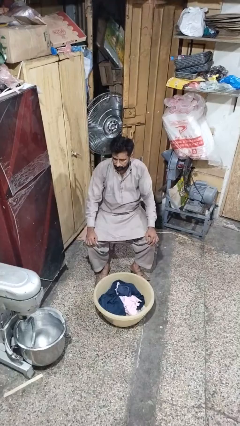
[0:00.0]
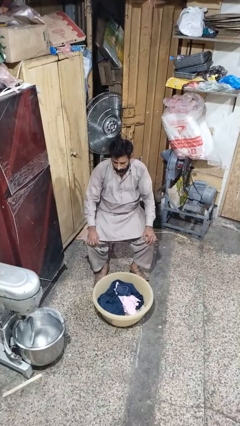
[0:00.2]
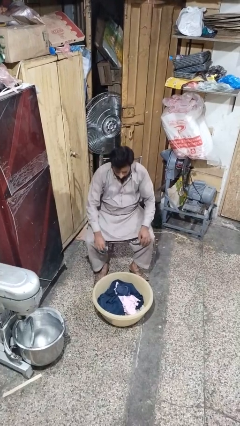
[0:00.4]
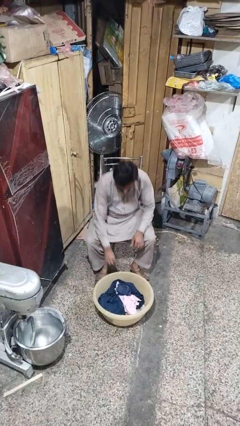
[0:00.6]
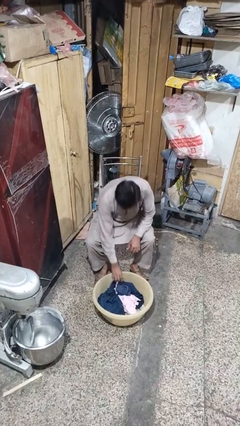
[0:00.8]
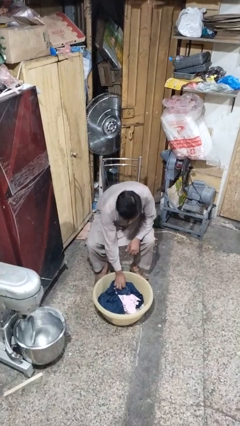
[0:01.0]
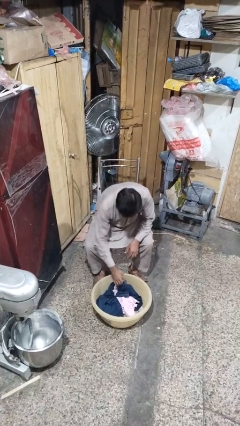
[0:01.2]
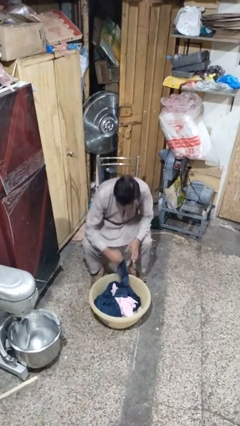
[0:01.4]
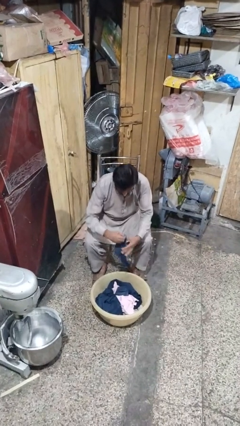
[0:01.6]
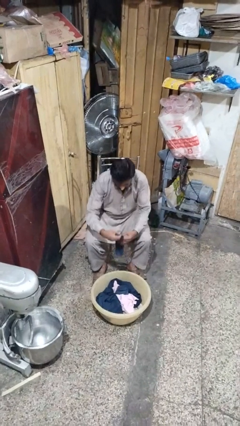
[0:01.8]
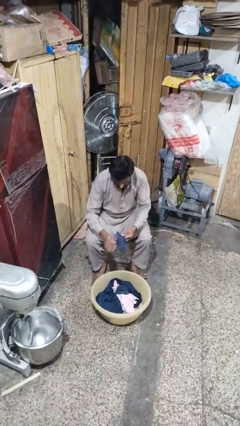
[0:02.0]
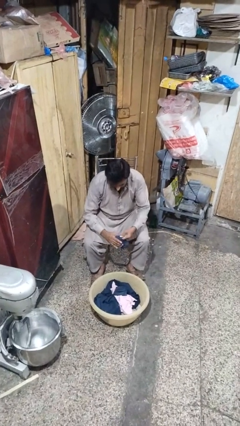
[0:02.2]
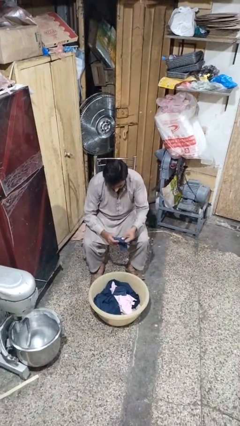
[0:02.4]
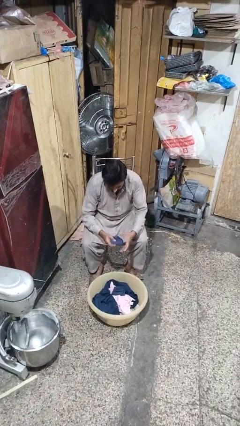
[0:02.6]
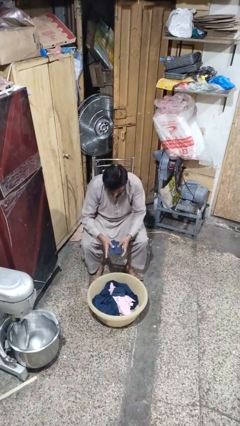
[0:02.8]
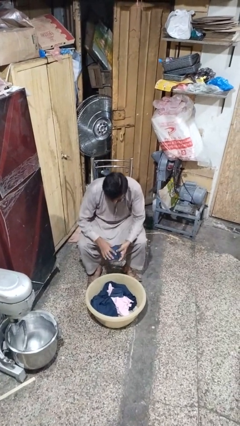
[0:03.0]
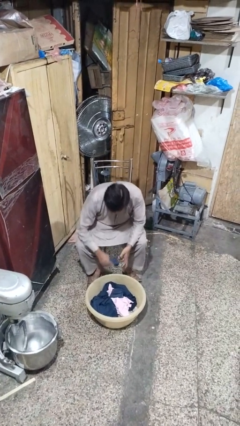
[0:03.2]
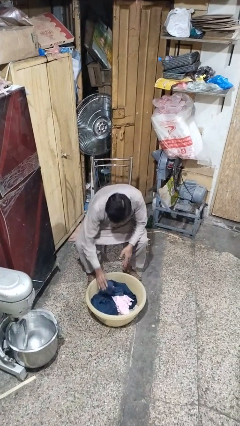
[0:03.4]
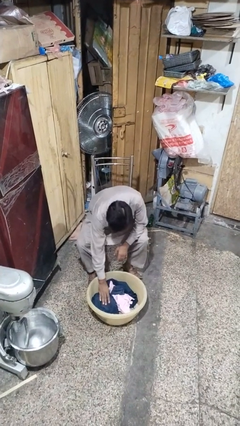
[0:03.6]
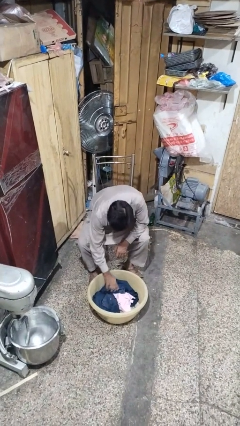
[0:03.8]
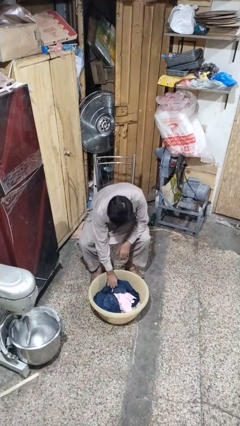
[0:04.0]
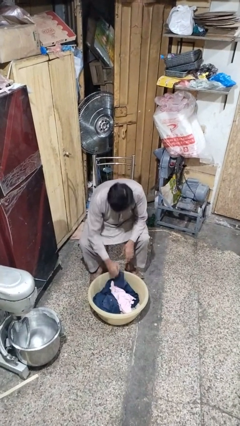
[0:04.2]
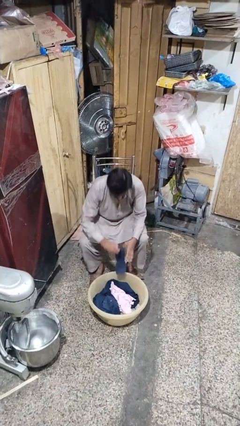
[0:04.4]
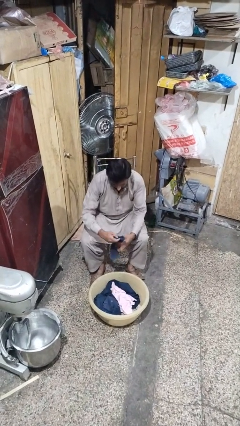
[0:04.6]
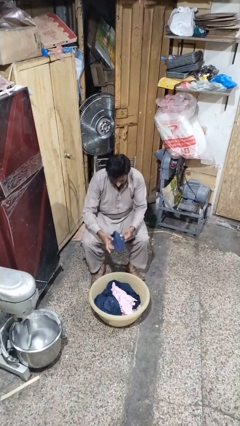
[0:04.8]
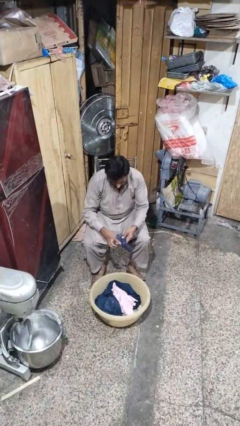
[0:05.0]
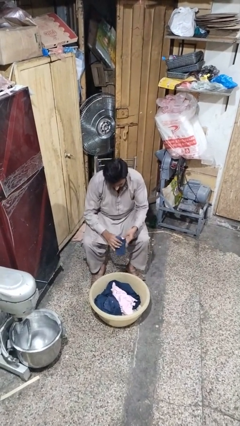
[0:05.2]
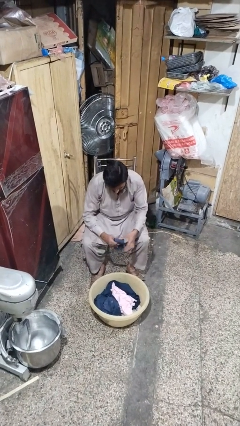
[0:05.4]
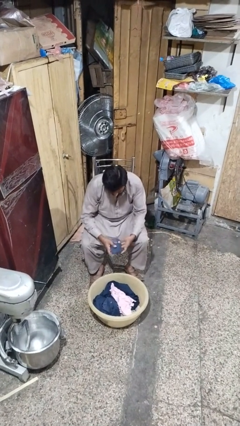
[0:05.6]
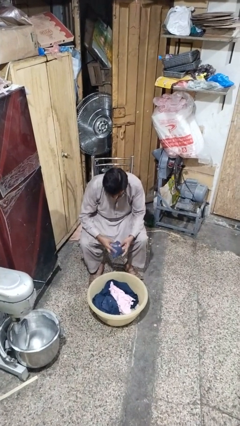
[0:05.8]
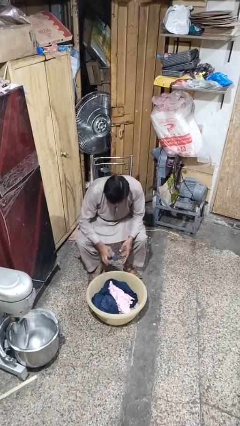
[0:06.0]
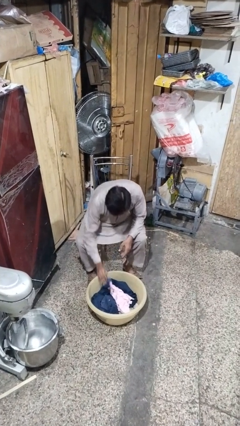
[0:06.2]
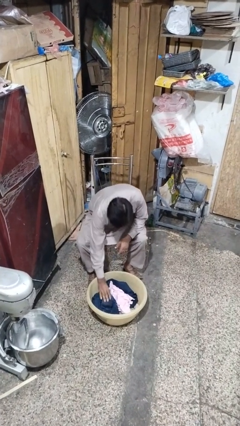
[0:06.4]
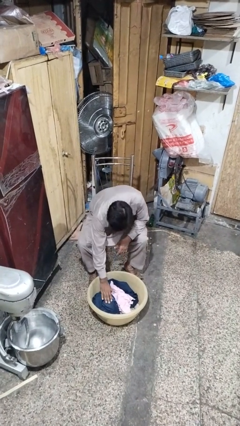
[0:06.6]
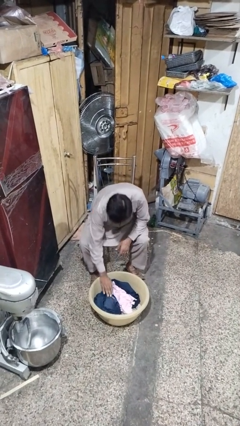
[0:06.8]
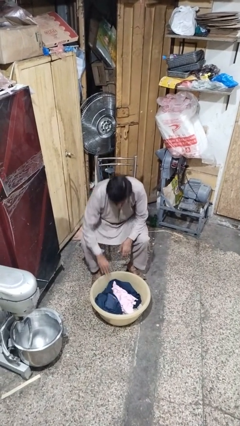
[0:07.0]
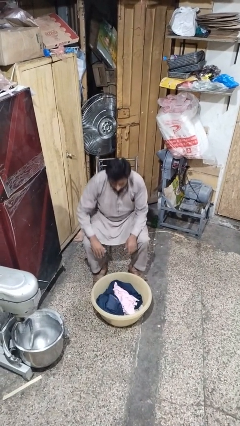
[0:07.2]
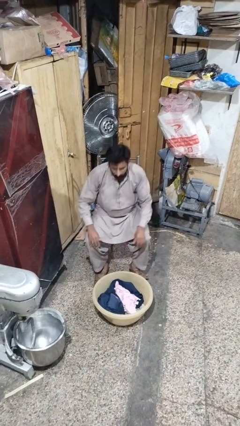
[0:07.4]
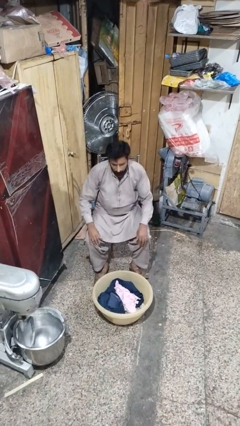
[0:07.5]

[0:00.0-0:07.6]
person folds socks

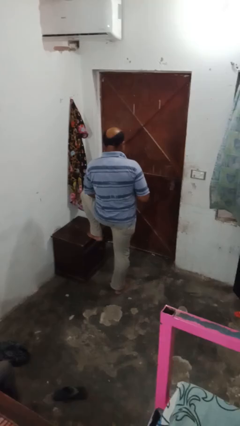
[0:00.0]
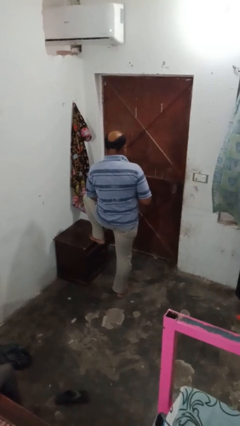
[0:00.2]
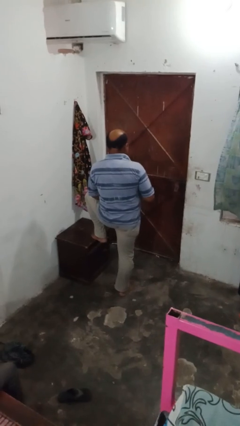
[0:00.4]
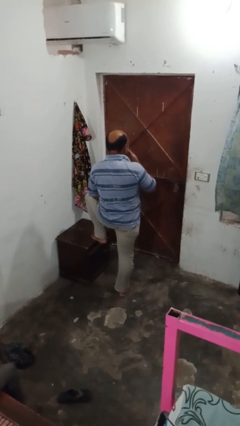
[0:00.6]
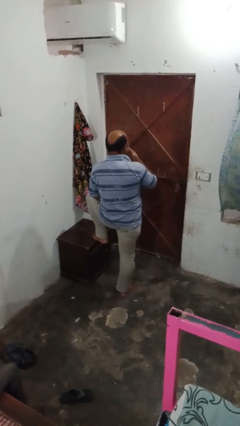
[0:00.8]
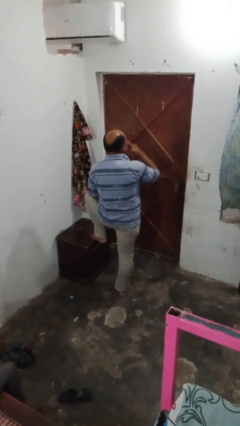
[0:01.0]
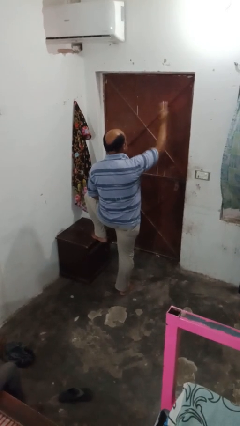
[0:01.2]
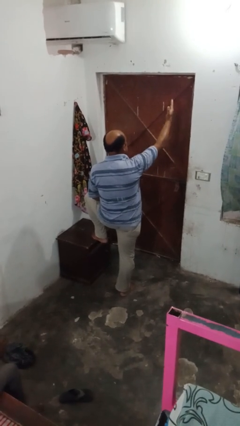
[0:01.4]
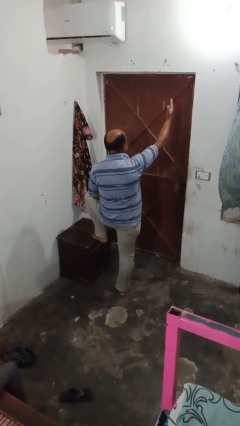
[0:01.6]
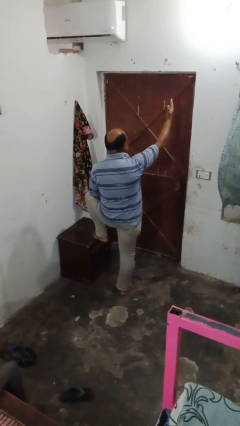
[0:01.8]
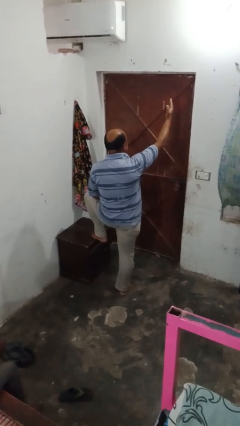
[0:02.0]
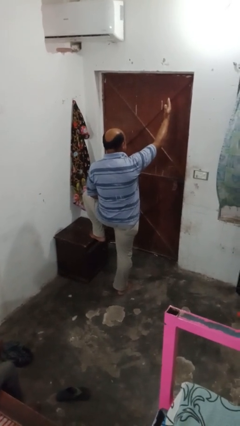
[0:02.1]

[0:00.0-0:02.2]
person gestures blow kiss

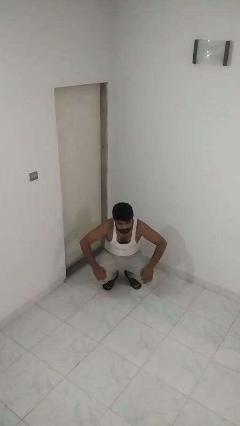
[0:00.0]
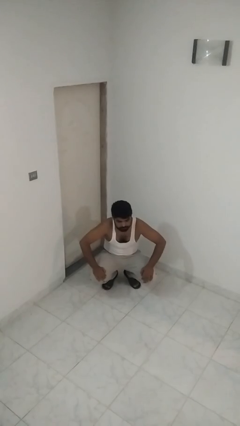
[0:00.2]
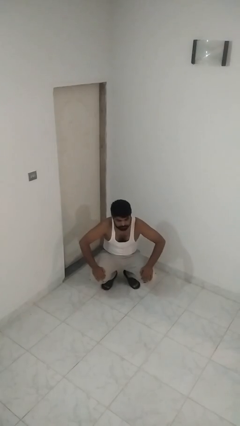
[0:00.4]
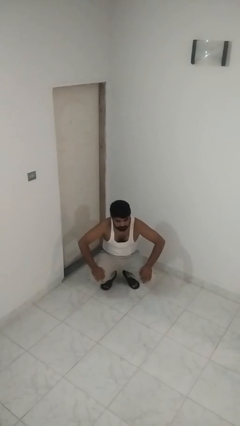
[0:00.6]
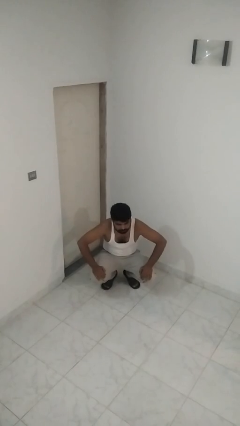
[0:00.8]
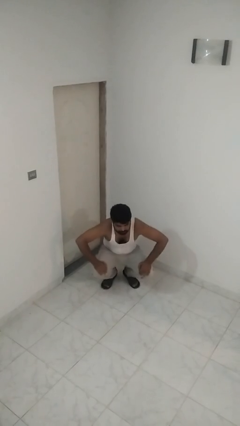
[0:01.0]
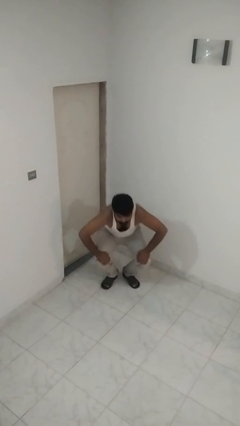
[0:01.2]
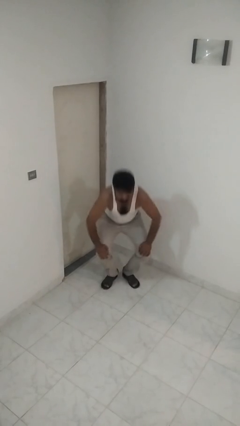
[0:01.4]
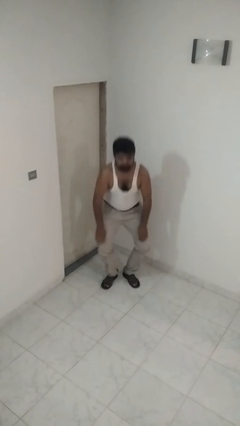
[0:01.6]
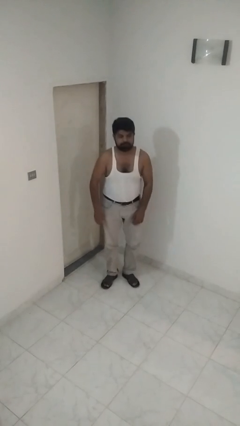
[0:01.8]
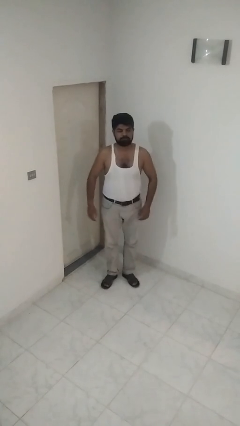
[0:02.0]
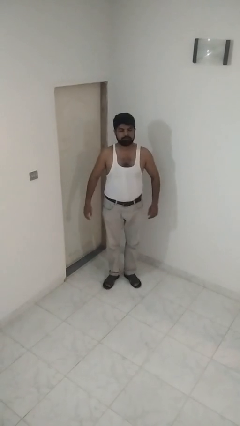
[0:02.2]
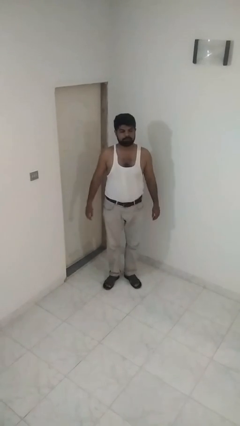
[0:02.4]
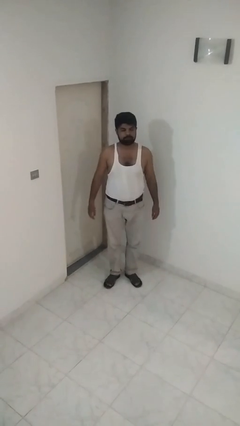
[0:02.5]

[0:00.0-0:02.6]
person stands up

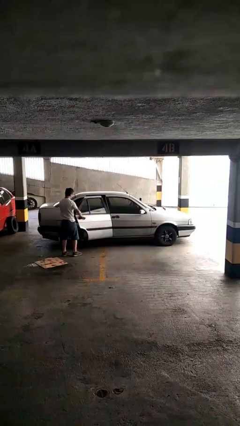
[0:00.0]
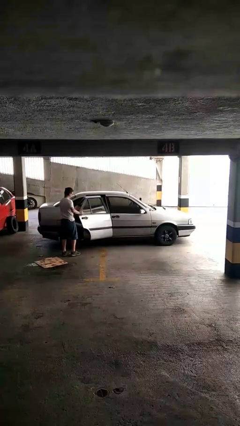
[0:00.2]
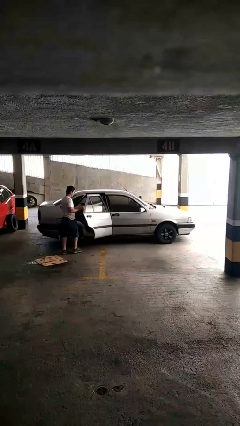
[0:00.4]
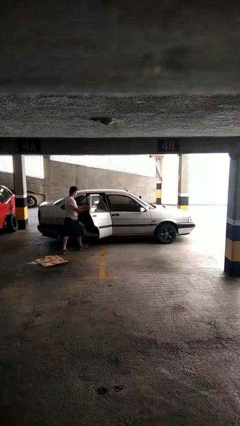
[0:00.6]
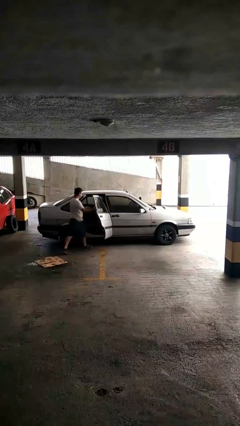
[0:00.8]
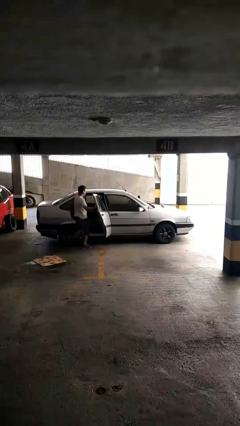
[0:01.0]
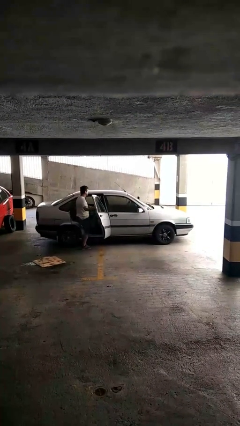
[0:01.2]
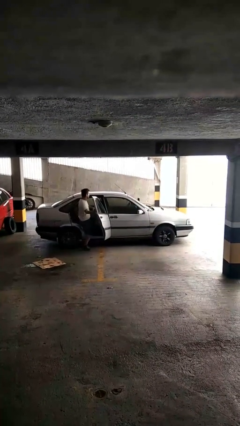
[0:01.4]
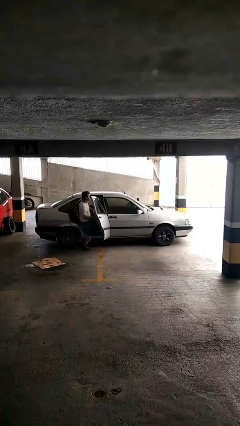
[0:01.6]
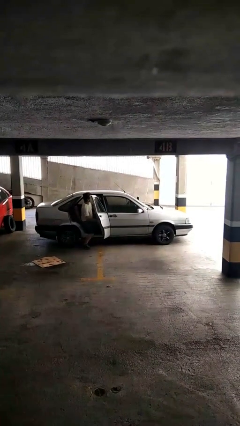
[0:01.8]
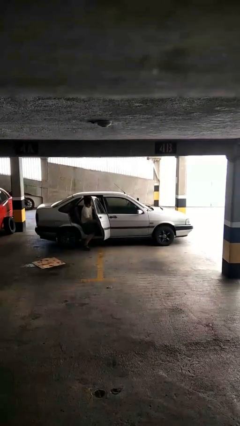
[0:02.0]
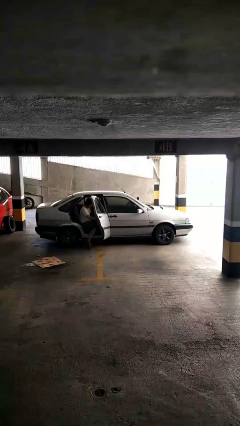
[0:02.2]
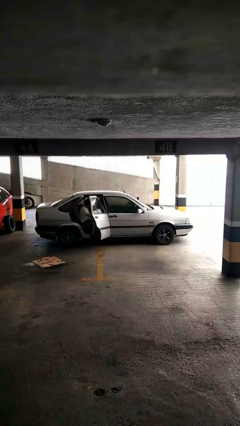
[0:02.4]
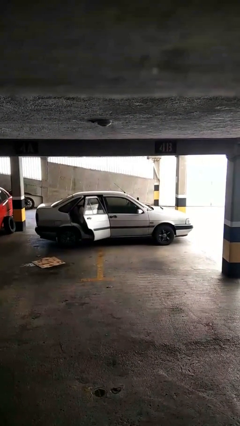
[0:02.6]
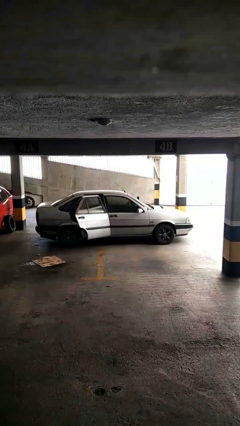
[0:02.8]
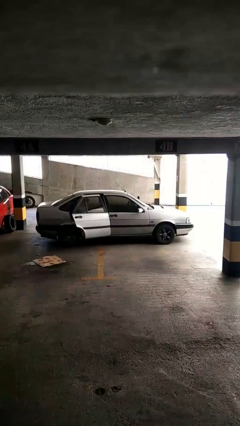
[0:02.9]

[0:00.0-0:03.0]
car picks up person

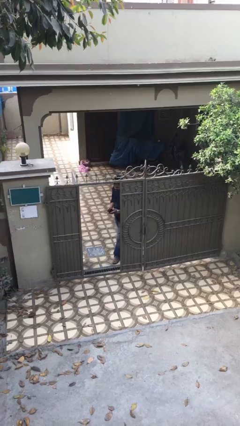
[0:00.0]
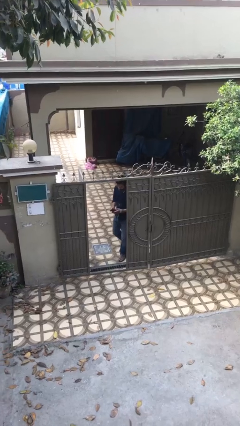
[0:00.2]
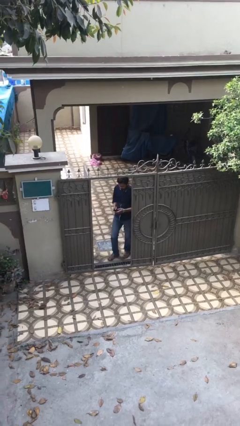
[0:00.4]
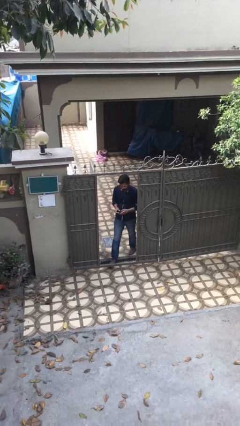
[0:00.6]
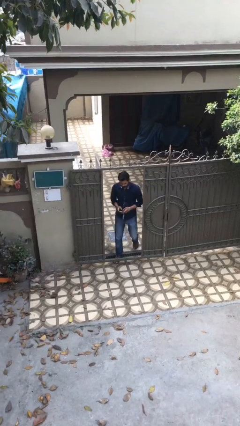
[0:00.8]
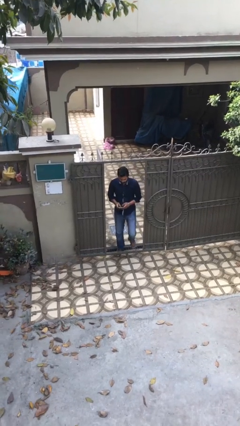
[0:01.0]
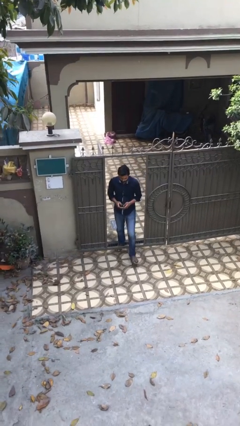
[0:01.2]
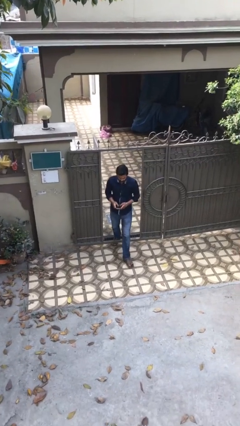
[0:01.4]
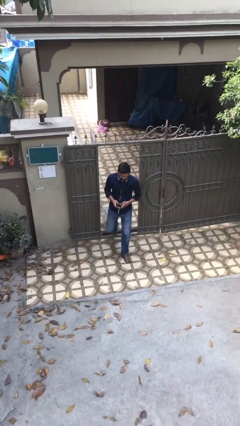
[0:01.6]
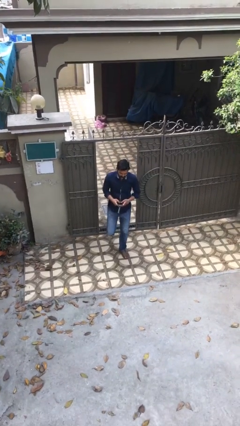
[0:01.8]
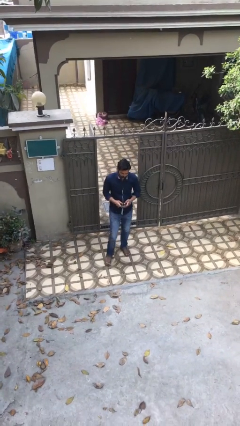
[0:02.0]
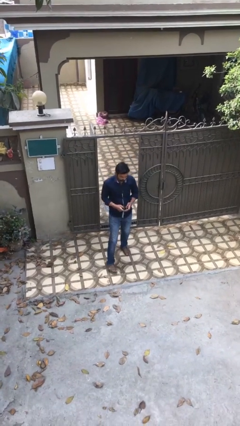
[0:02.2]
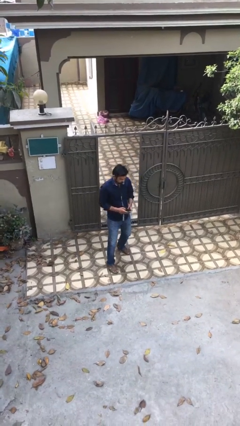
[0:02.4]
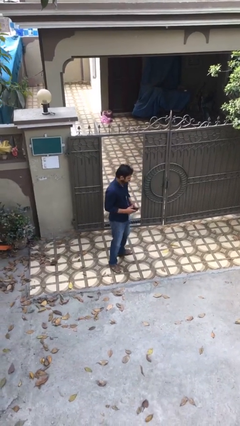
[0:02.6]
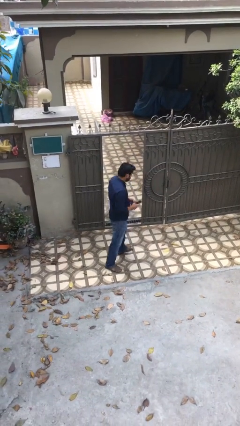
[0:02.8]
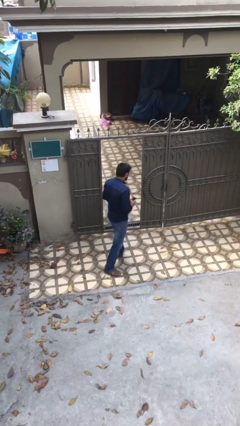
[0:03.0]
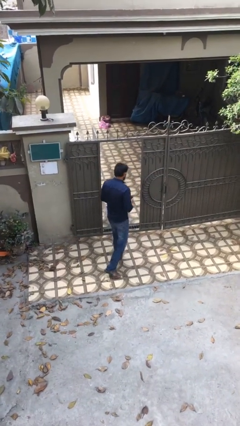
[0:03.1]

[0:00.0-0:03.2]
person enters scene through structure
